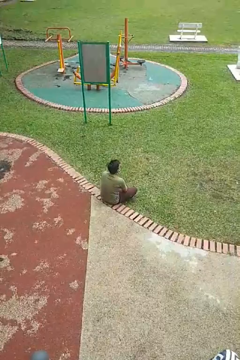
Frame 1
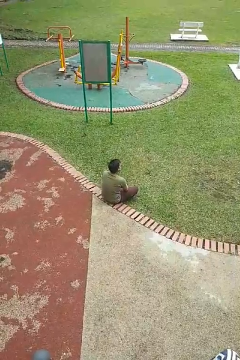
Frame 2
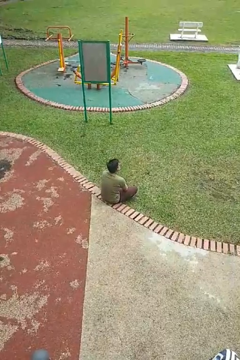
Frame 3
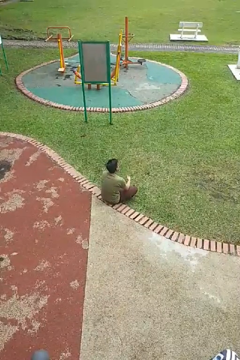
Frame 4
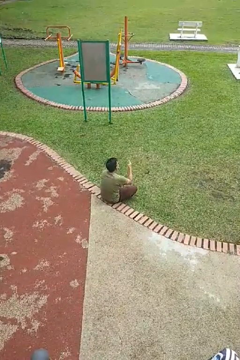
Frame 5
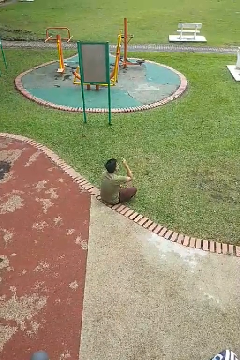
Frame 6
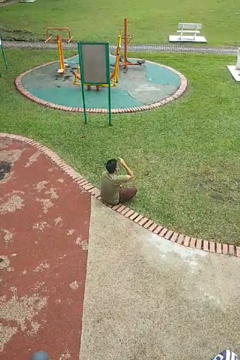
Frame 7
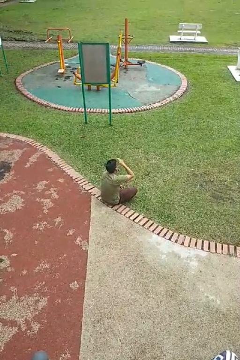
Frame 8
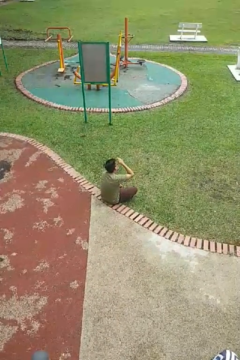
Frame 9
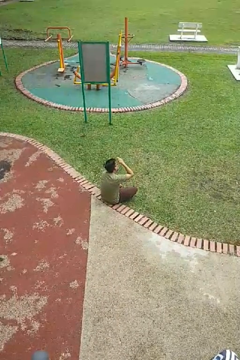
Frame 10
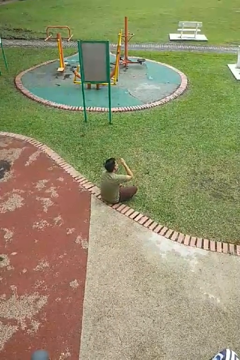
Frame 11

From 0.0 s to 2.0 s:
person shades eyes

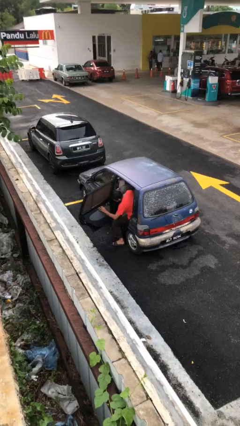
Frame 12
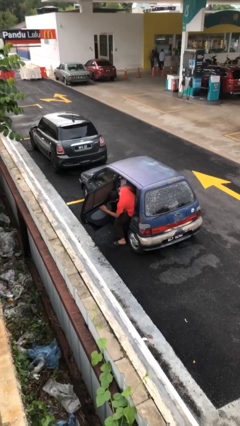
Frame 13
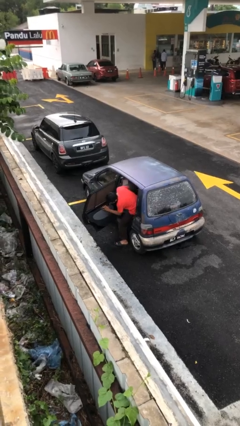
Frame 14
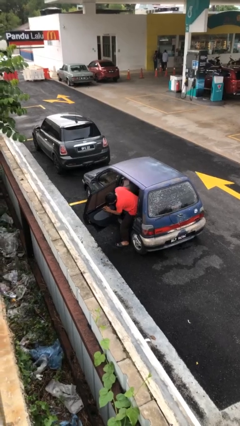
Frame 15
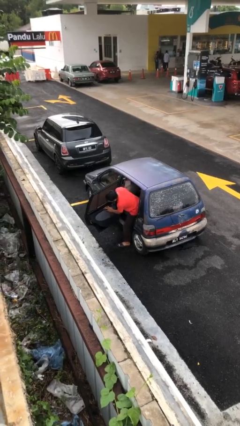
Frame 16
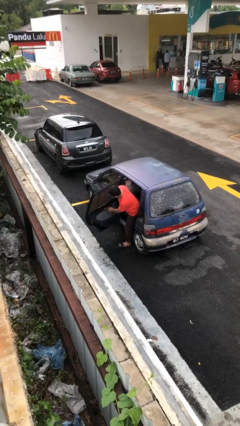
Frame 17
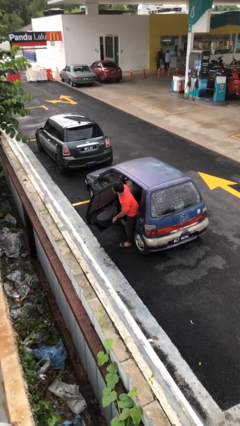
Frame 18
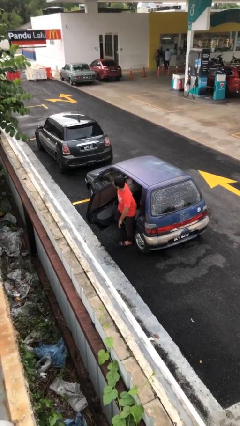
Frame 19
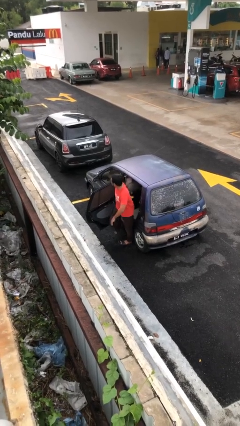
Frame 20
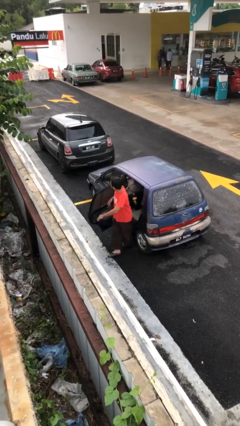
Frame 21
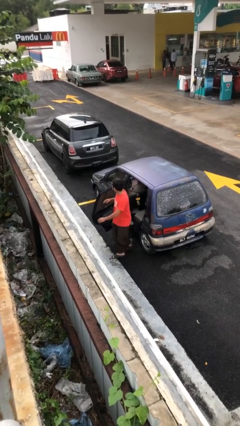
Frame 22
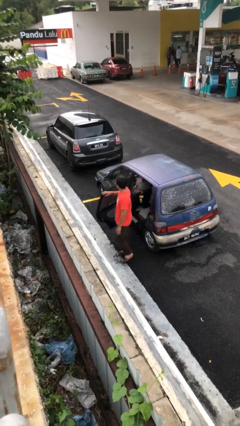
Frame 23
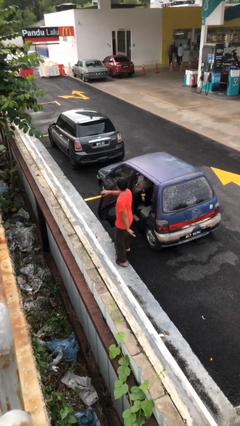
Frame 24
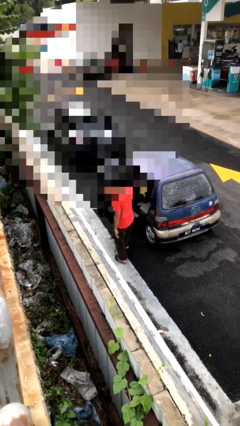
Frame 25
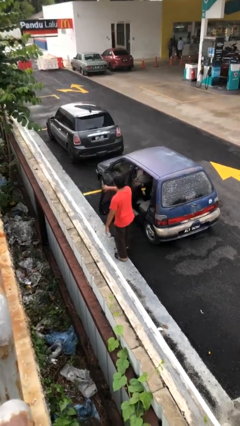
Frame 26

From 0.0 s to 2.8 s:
person exits car

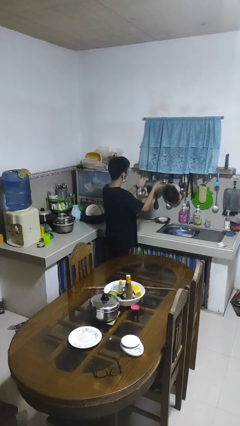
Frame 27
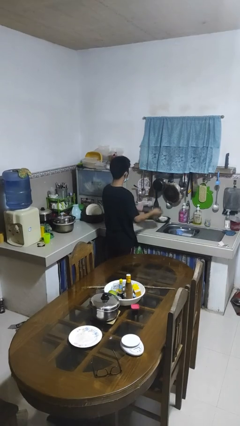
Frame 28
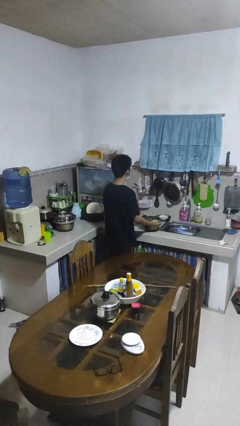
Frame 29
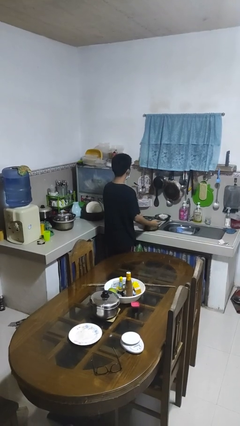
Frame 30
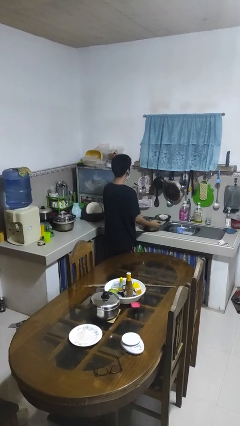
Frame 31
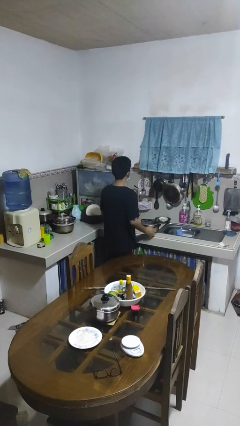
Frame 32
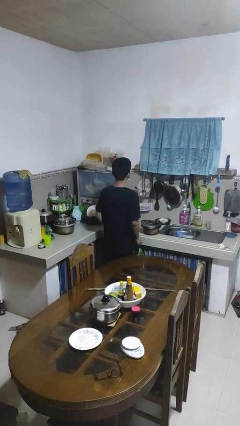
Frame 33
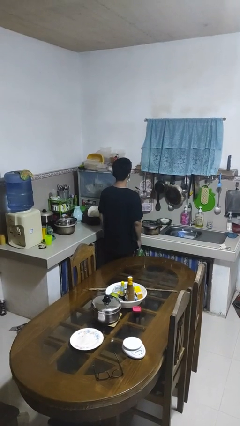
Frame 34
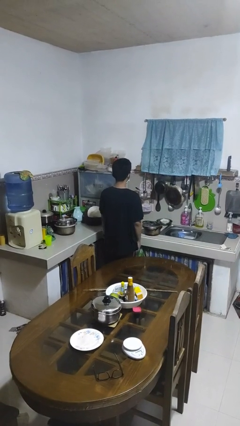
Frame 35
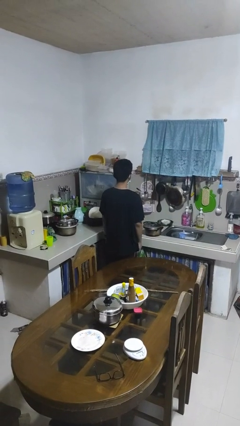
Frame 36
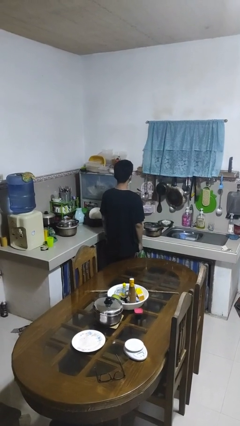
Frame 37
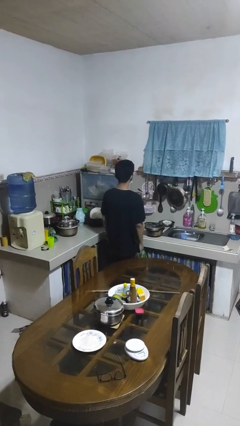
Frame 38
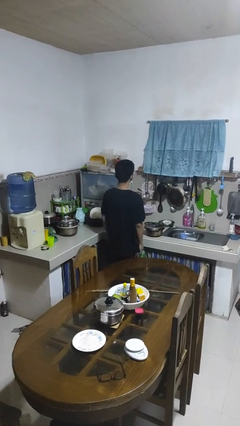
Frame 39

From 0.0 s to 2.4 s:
person puts down object on countertop

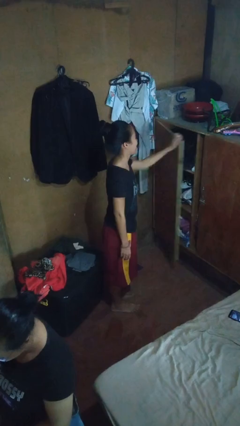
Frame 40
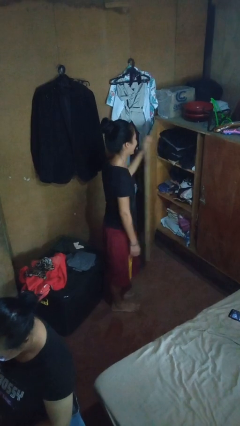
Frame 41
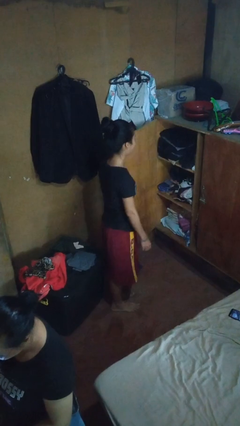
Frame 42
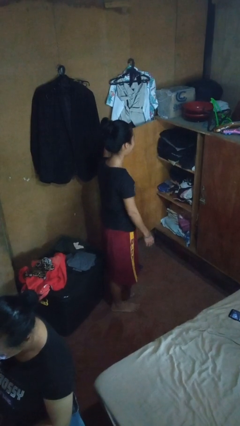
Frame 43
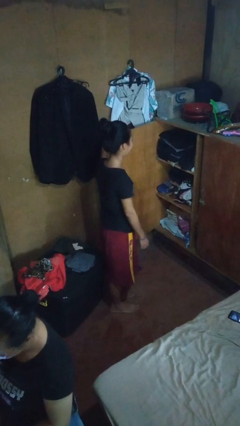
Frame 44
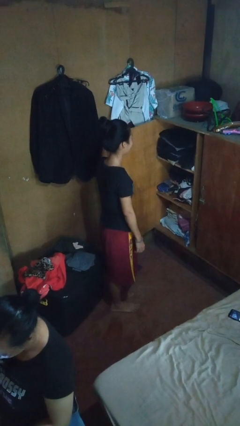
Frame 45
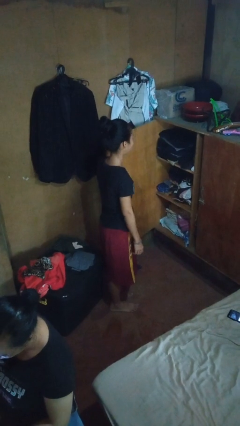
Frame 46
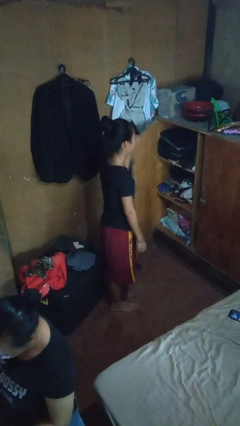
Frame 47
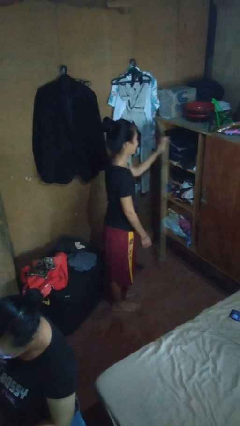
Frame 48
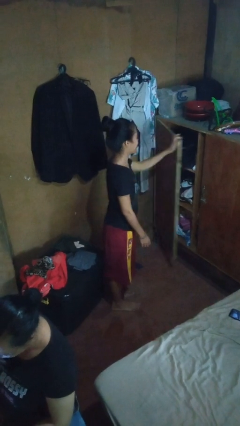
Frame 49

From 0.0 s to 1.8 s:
person opens closet door

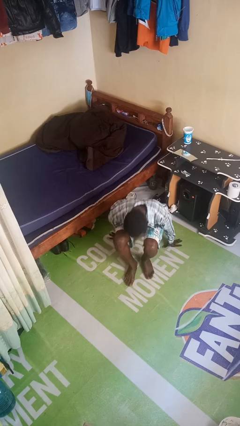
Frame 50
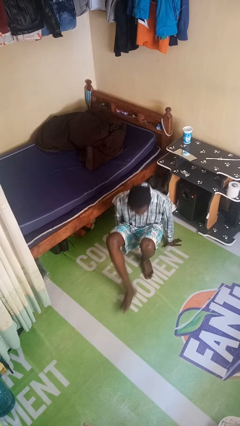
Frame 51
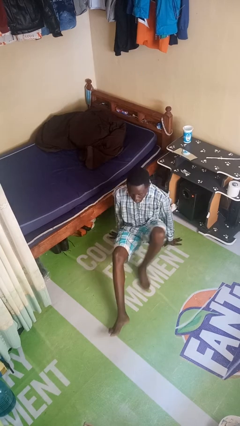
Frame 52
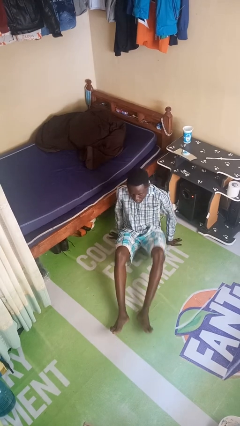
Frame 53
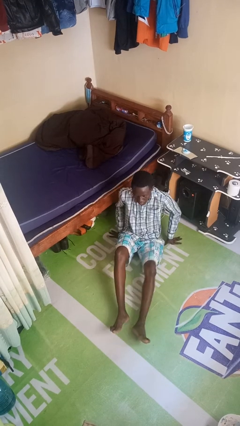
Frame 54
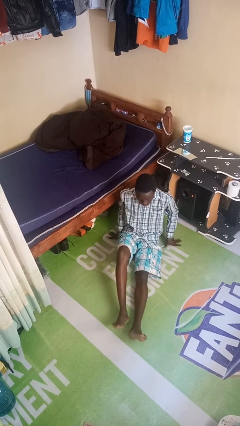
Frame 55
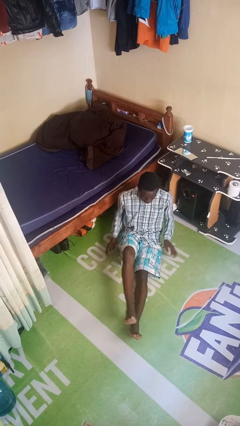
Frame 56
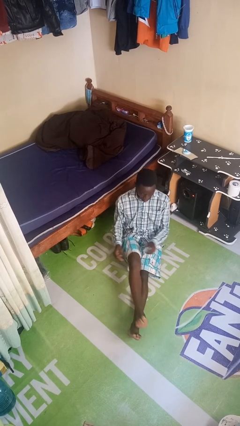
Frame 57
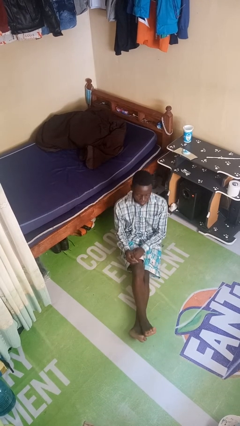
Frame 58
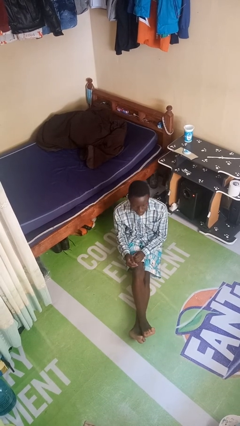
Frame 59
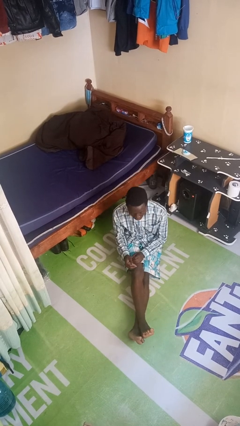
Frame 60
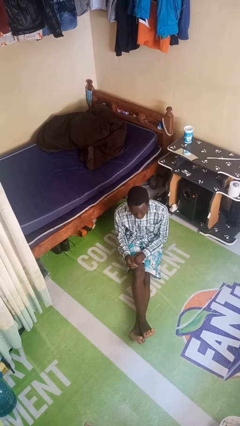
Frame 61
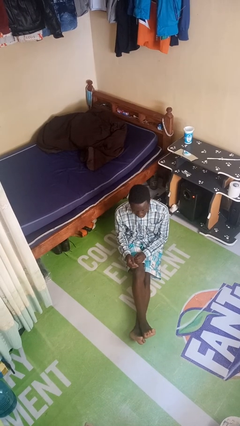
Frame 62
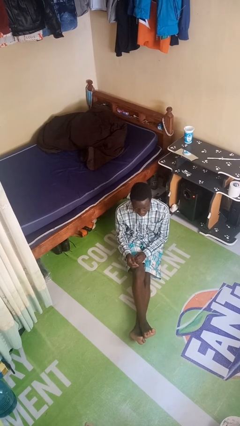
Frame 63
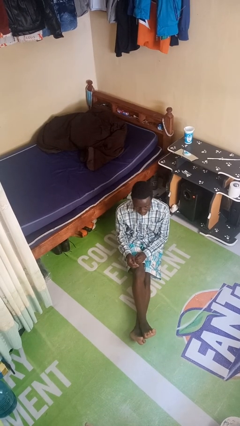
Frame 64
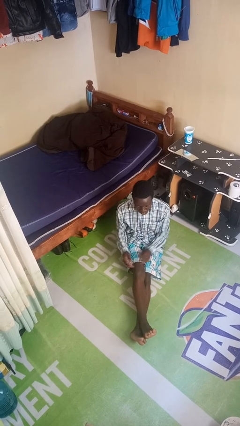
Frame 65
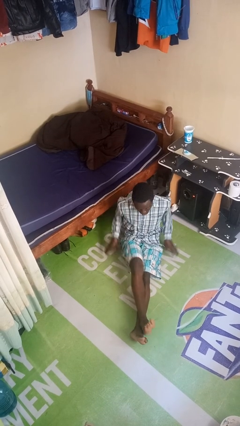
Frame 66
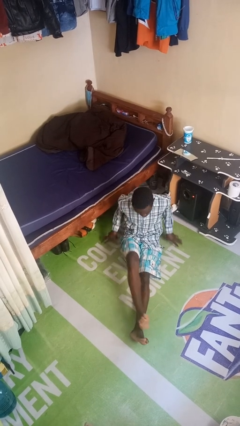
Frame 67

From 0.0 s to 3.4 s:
person sits crisscross

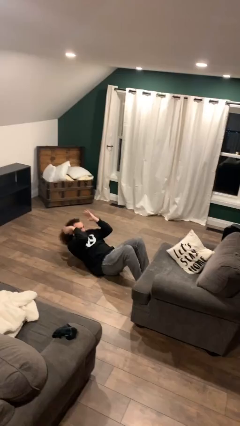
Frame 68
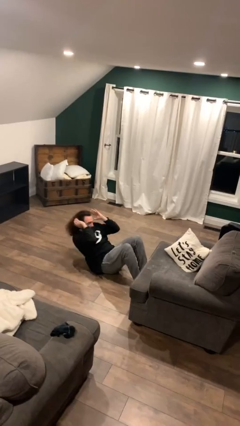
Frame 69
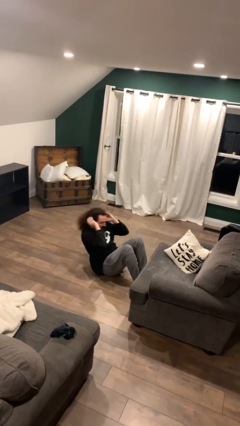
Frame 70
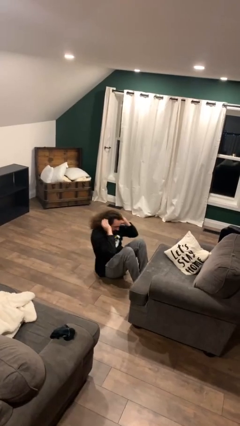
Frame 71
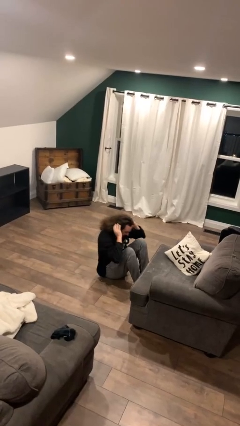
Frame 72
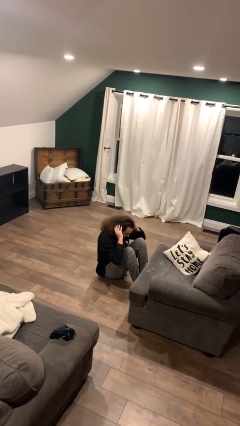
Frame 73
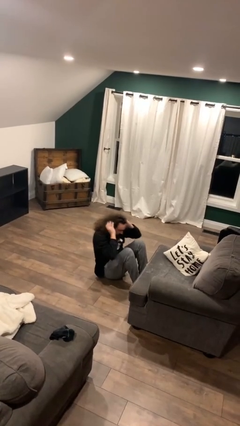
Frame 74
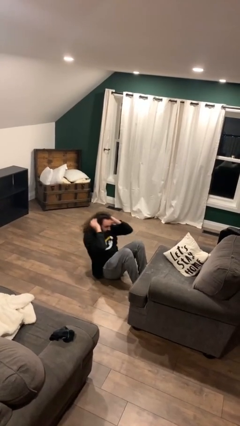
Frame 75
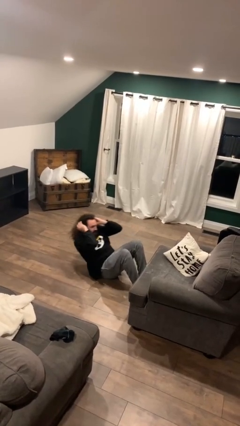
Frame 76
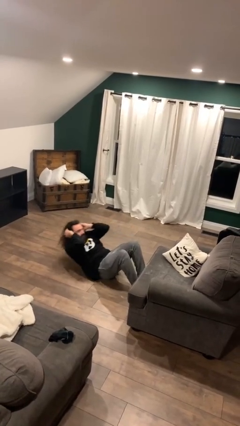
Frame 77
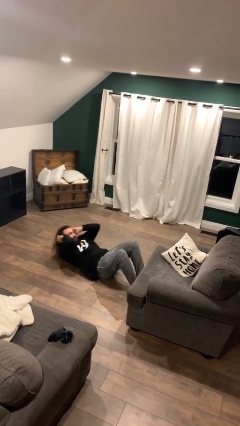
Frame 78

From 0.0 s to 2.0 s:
person exercises with situp

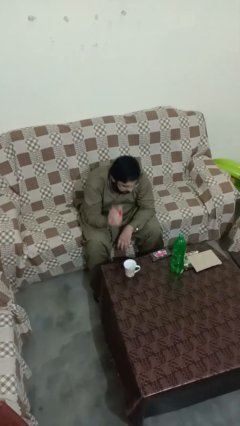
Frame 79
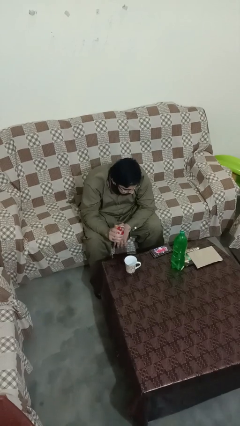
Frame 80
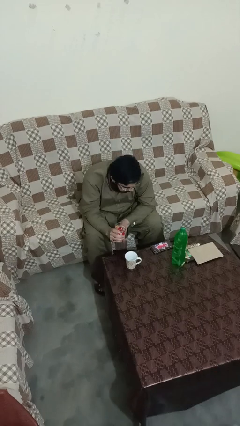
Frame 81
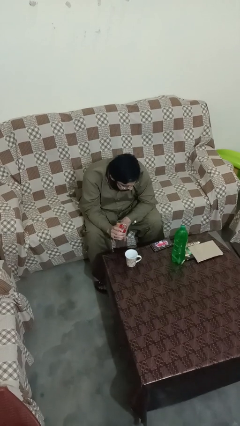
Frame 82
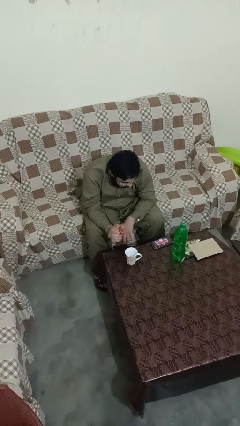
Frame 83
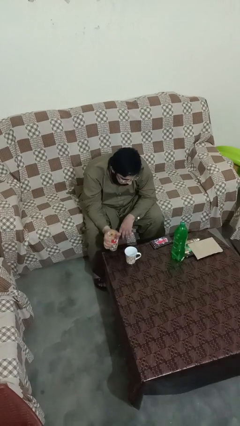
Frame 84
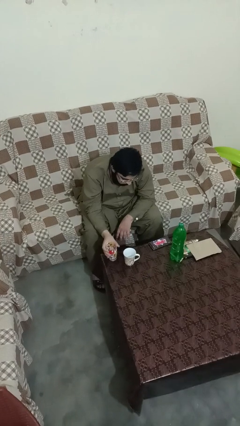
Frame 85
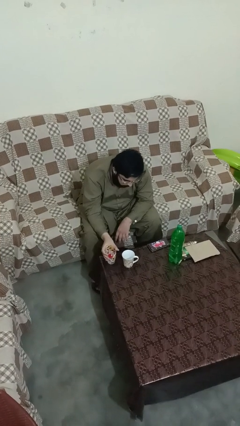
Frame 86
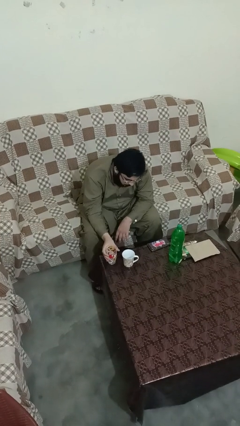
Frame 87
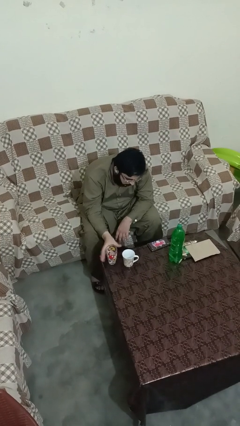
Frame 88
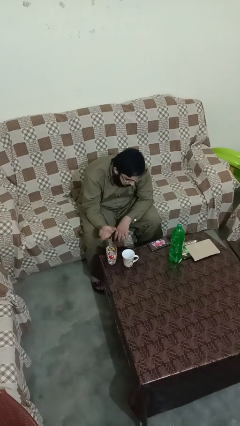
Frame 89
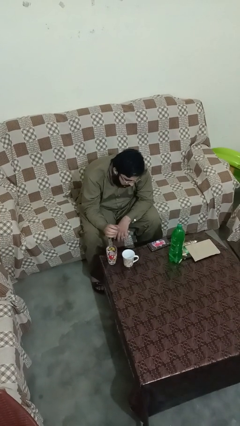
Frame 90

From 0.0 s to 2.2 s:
person puts down object on table

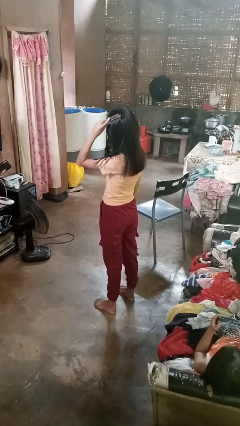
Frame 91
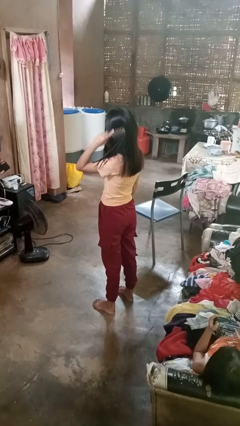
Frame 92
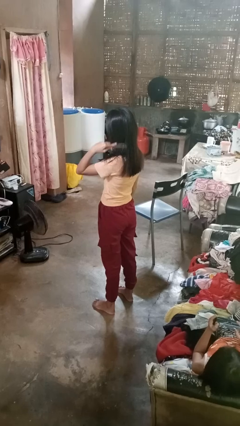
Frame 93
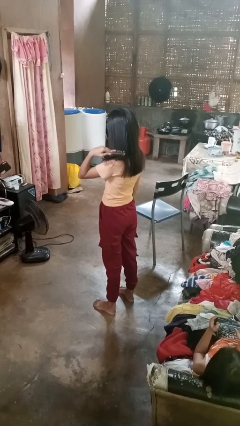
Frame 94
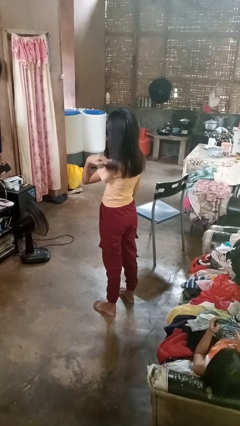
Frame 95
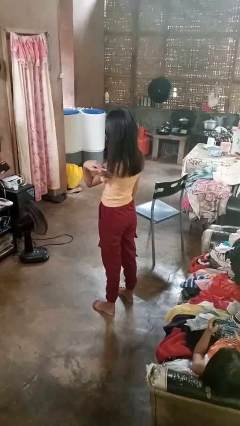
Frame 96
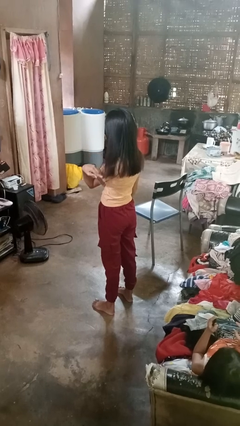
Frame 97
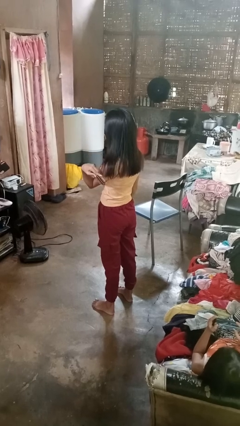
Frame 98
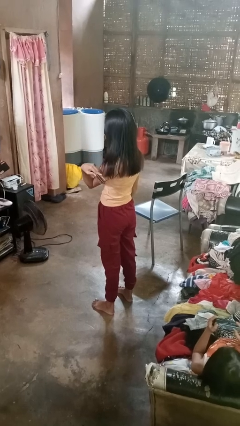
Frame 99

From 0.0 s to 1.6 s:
person brushes hair
